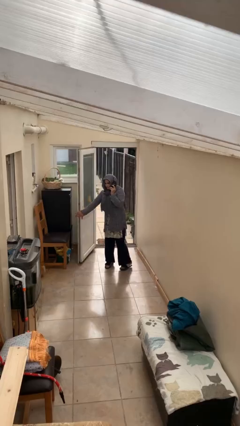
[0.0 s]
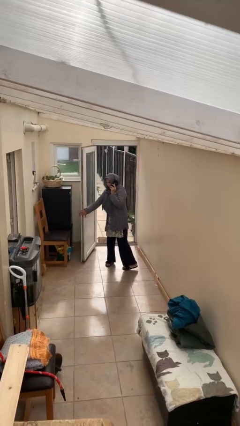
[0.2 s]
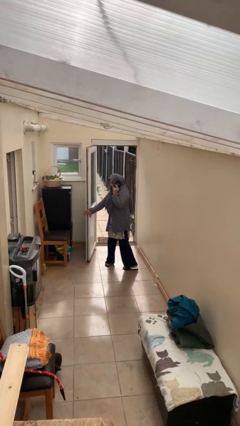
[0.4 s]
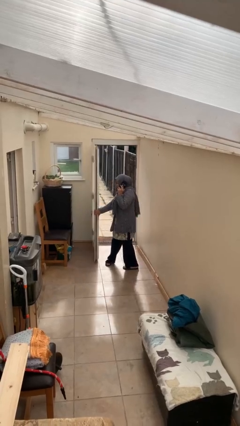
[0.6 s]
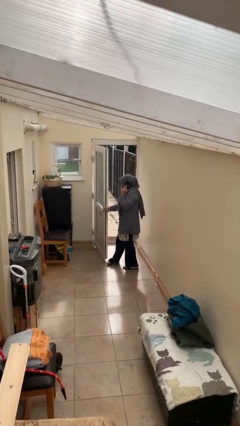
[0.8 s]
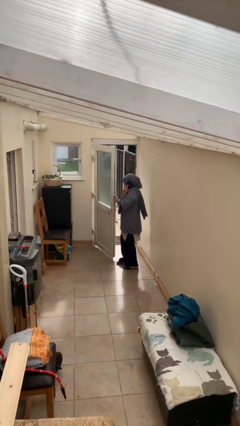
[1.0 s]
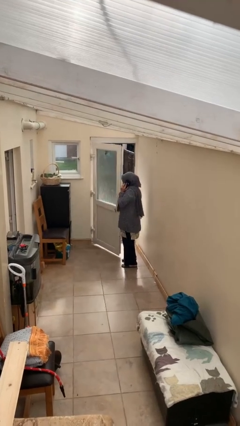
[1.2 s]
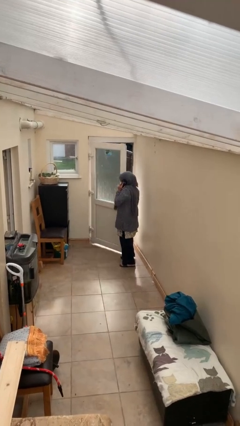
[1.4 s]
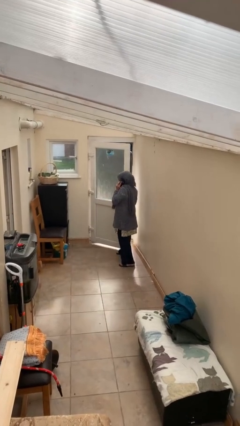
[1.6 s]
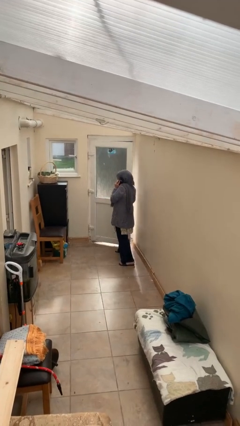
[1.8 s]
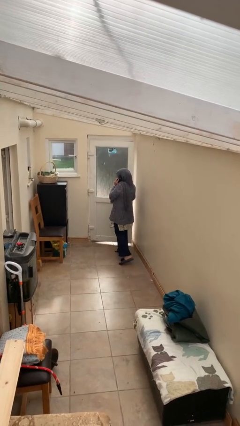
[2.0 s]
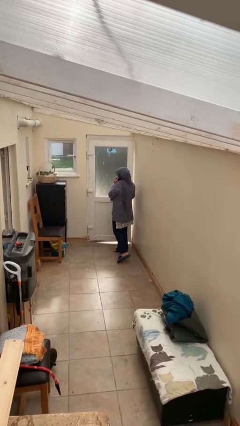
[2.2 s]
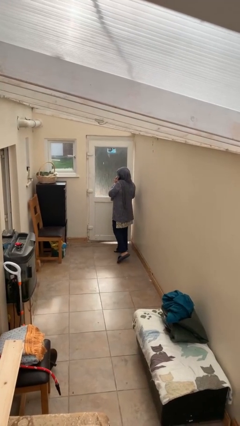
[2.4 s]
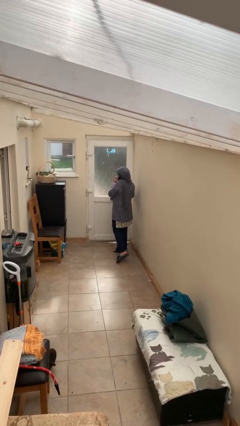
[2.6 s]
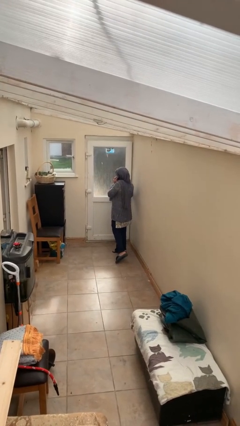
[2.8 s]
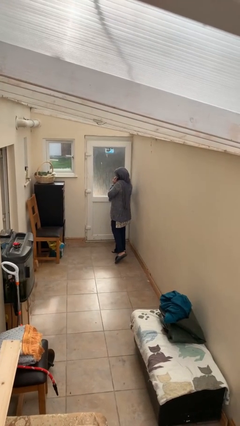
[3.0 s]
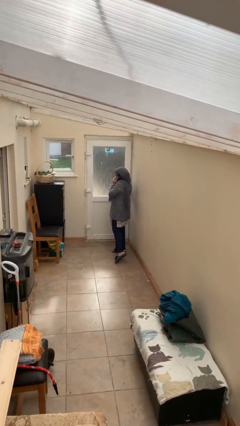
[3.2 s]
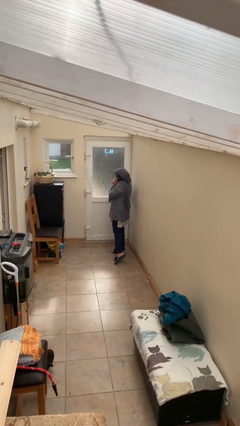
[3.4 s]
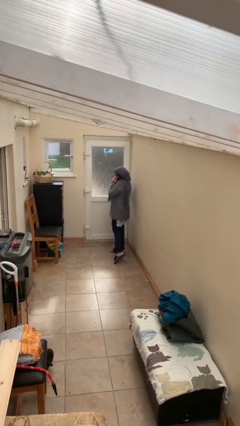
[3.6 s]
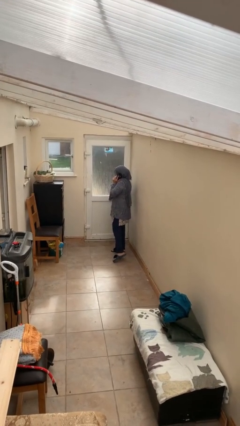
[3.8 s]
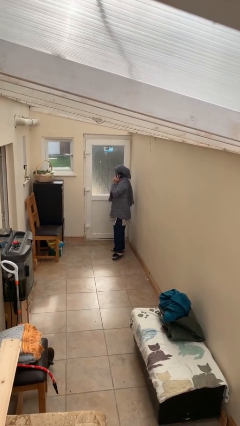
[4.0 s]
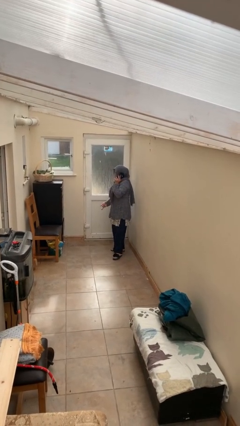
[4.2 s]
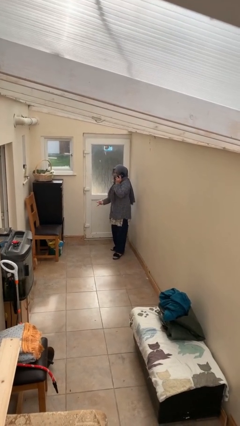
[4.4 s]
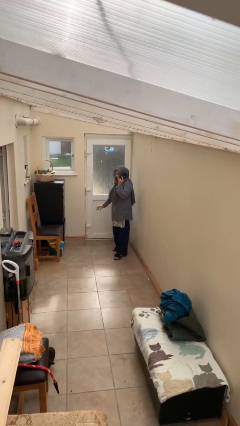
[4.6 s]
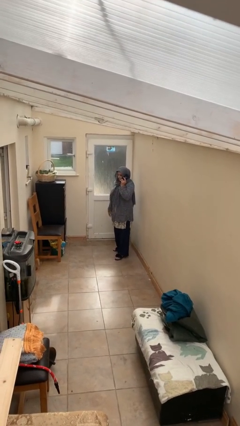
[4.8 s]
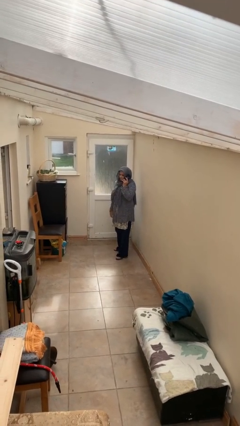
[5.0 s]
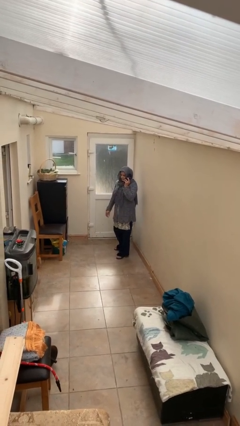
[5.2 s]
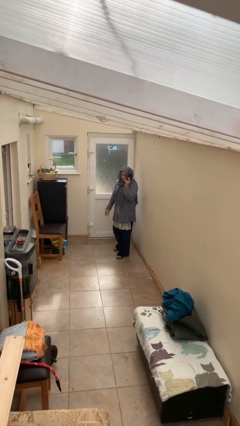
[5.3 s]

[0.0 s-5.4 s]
person closes facility door

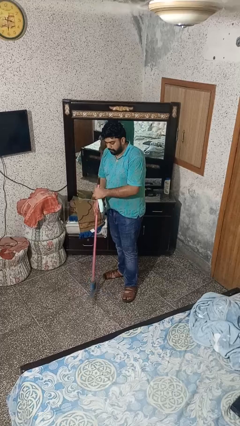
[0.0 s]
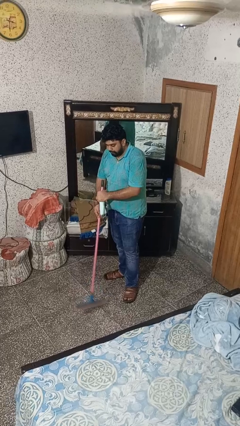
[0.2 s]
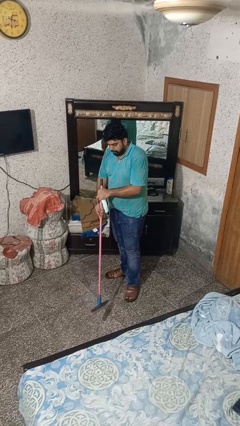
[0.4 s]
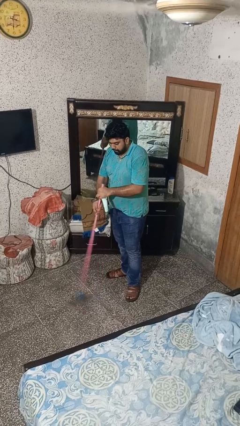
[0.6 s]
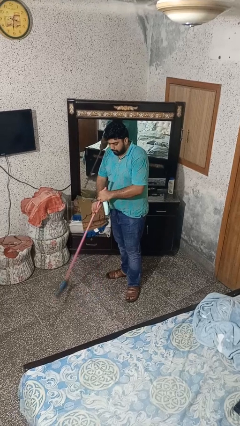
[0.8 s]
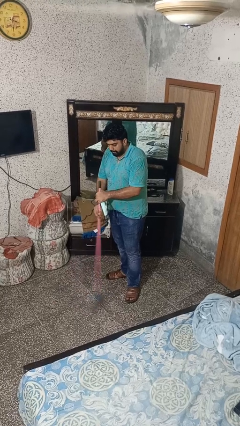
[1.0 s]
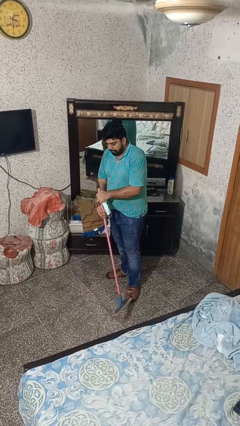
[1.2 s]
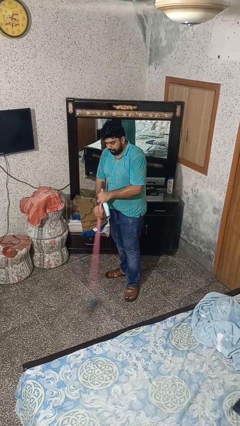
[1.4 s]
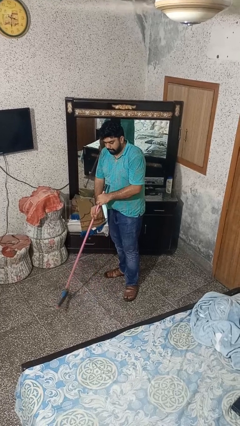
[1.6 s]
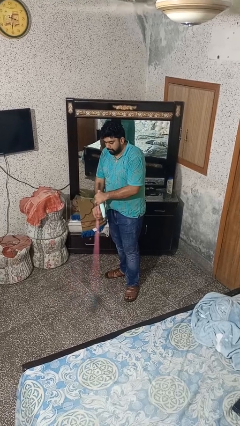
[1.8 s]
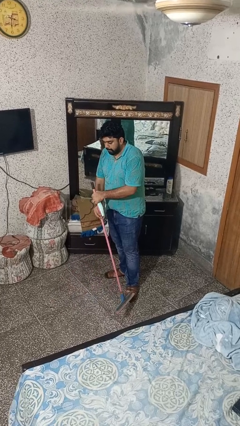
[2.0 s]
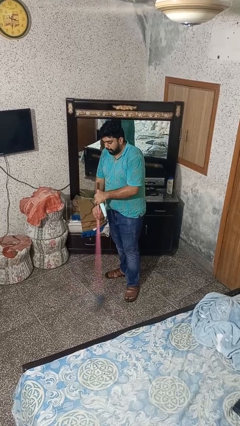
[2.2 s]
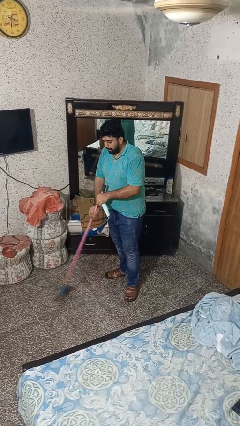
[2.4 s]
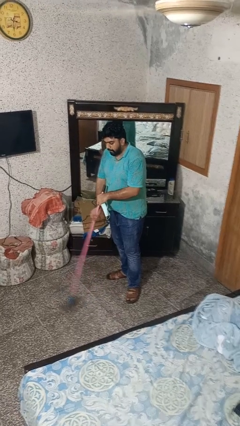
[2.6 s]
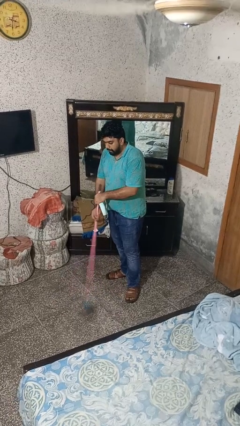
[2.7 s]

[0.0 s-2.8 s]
person sweeps floor

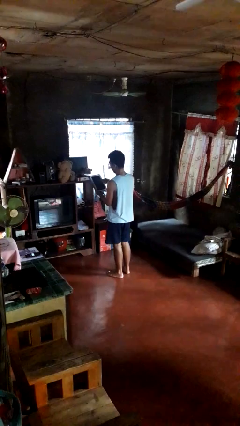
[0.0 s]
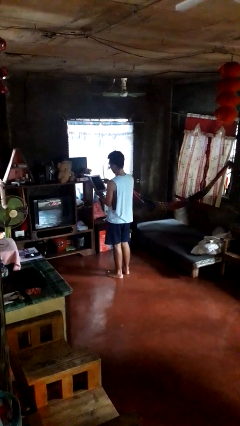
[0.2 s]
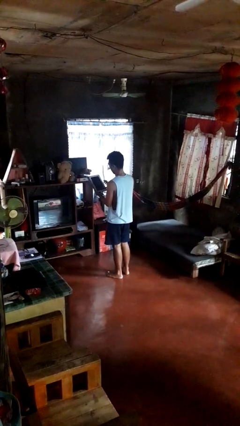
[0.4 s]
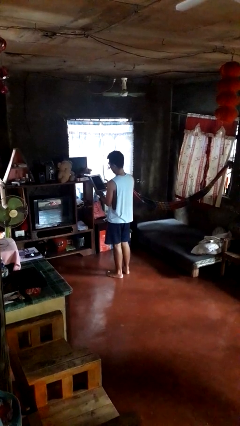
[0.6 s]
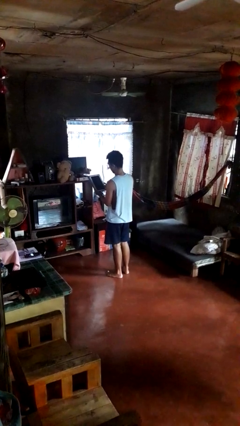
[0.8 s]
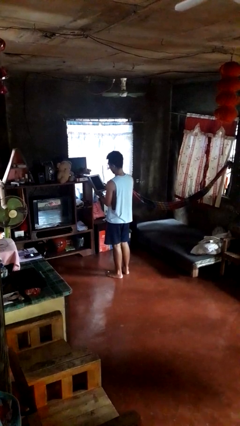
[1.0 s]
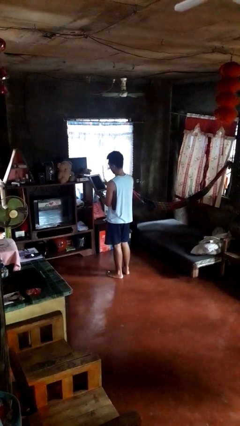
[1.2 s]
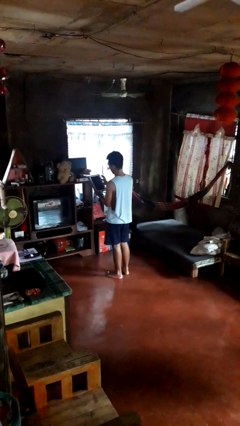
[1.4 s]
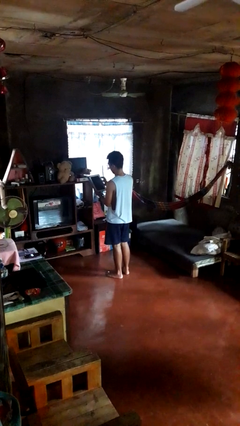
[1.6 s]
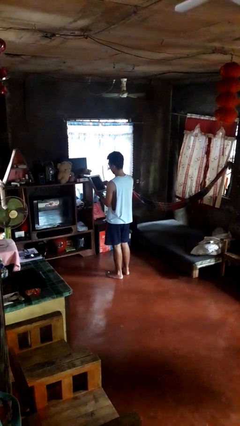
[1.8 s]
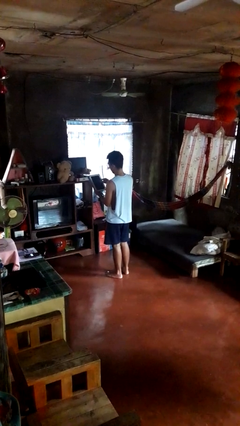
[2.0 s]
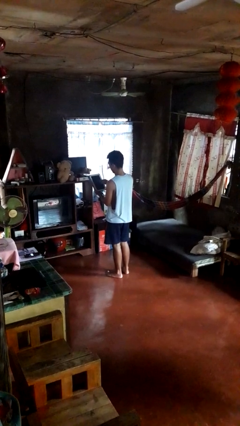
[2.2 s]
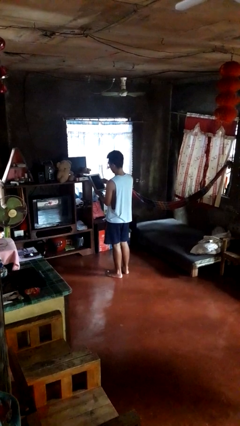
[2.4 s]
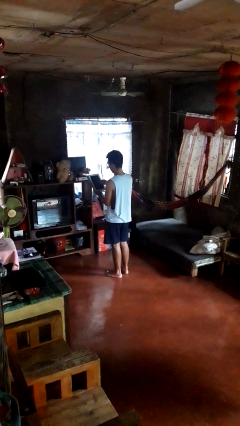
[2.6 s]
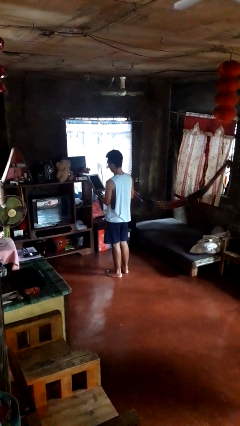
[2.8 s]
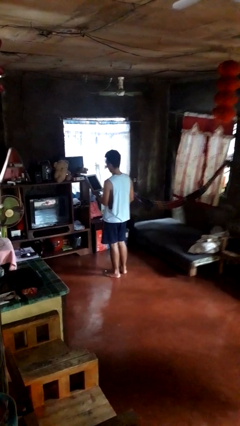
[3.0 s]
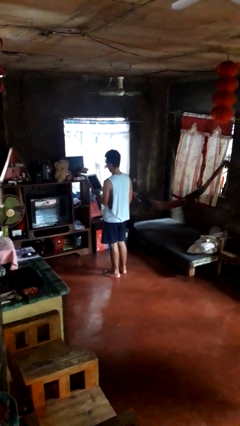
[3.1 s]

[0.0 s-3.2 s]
person interacts with tablet

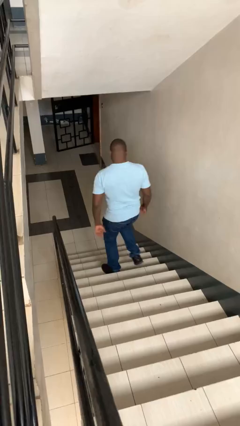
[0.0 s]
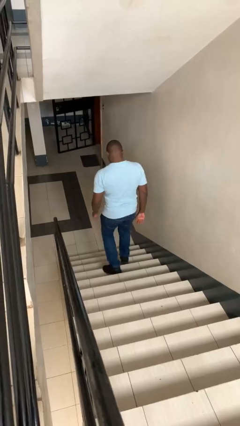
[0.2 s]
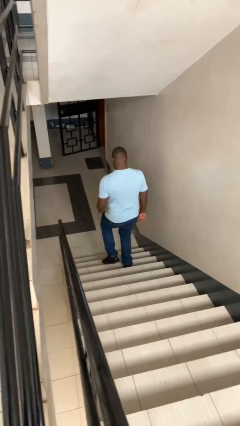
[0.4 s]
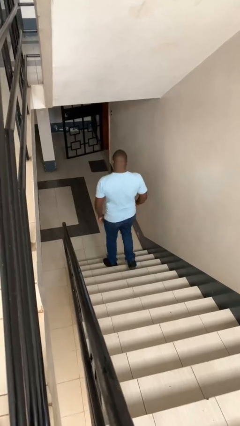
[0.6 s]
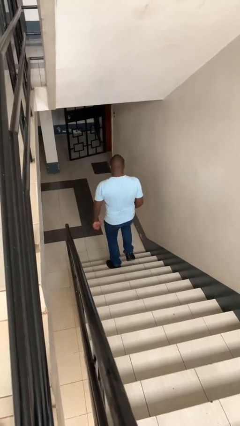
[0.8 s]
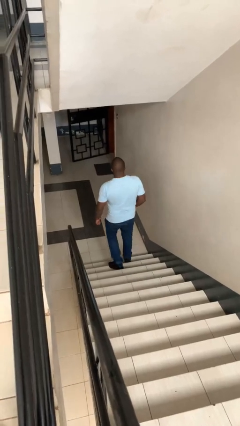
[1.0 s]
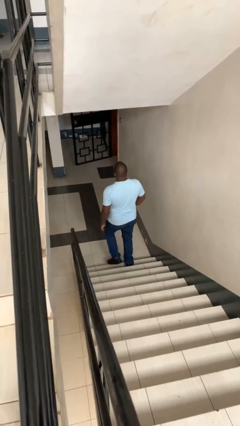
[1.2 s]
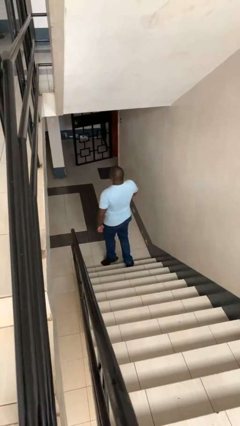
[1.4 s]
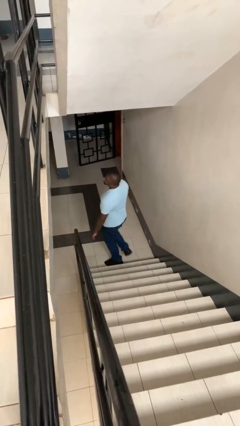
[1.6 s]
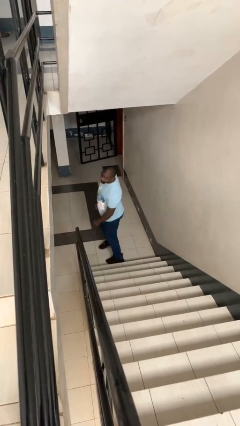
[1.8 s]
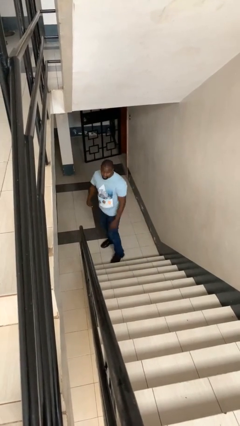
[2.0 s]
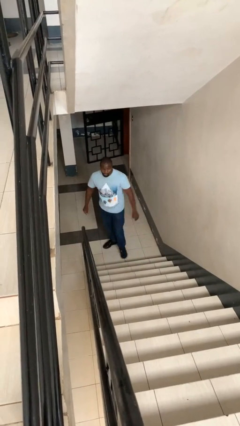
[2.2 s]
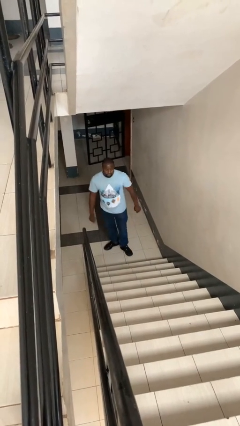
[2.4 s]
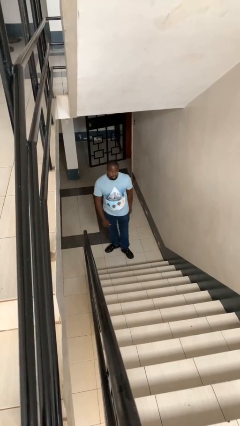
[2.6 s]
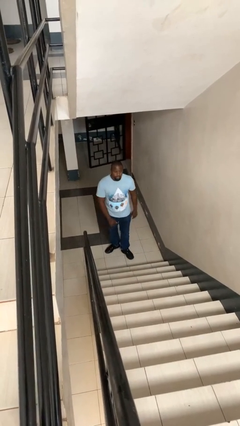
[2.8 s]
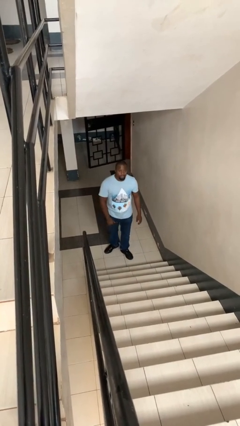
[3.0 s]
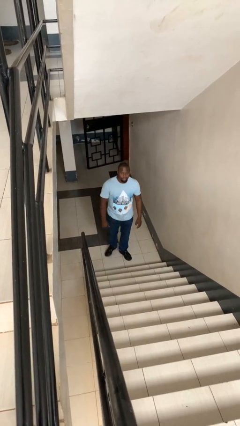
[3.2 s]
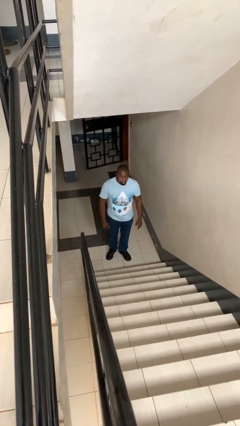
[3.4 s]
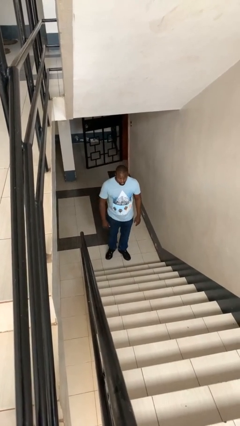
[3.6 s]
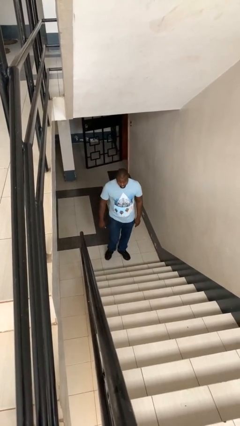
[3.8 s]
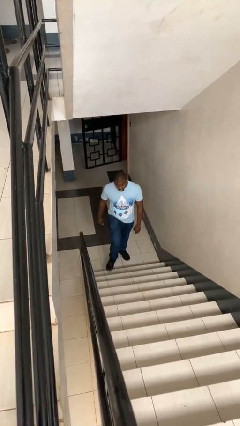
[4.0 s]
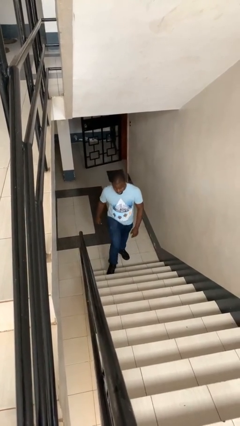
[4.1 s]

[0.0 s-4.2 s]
person climbs down stairs

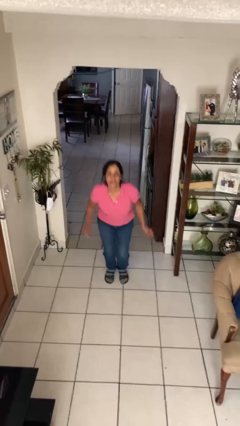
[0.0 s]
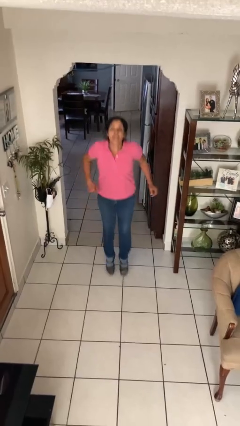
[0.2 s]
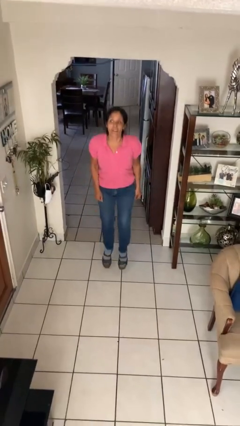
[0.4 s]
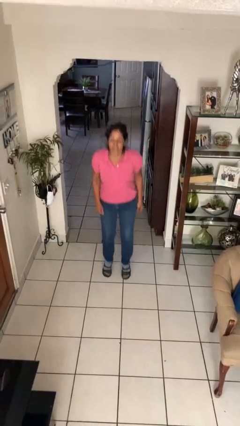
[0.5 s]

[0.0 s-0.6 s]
person jumps

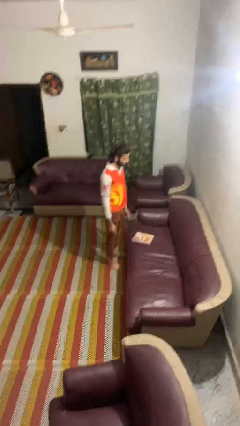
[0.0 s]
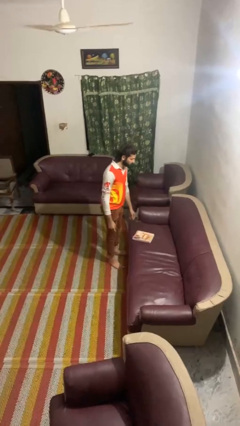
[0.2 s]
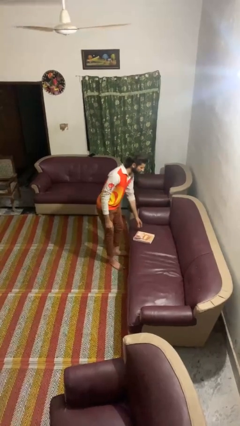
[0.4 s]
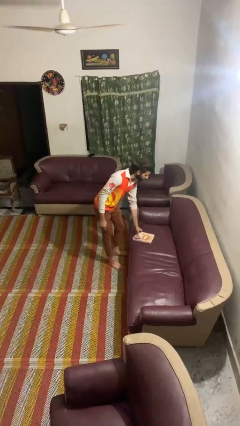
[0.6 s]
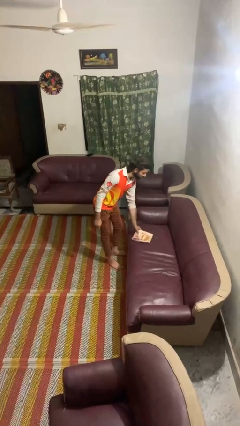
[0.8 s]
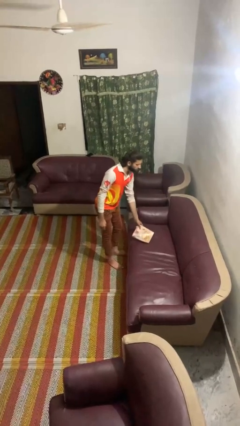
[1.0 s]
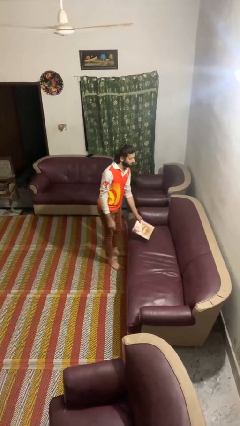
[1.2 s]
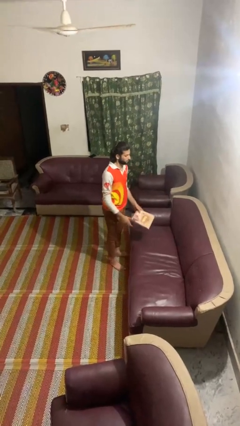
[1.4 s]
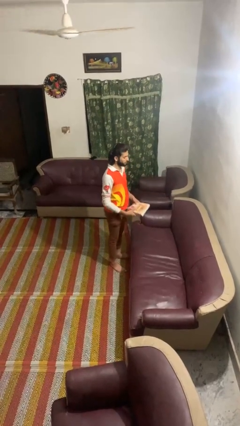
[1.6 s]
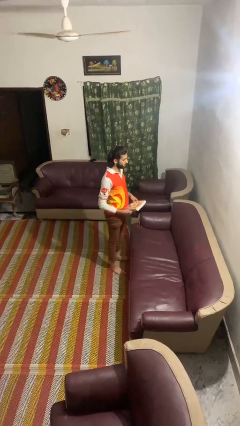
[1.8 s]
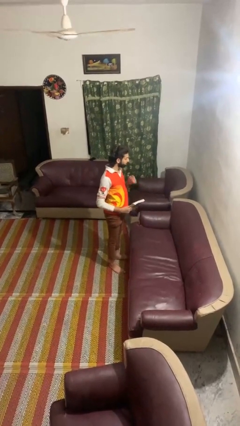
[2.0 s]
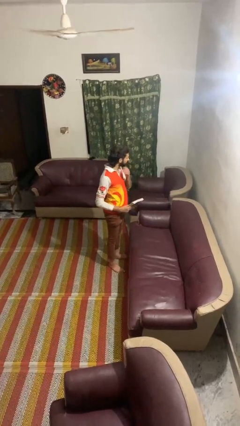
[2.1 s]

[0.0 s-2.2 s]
person picks up object from couch
